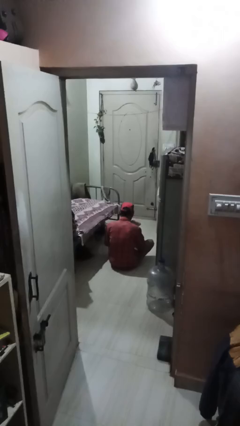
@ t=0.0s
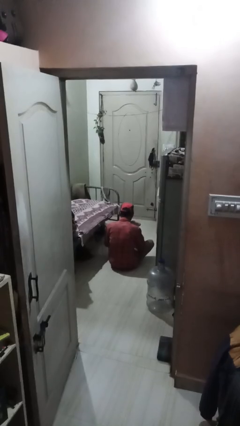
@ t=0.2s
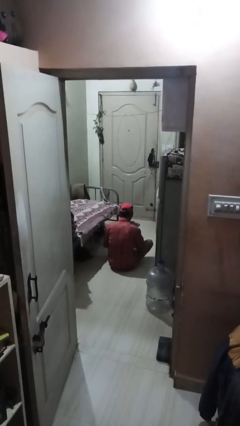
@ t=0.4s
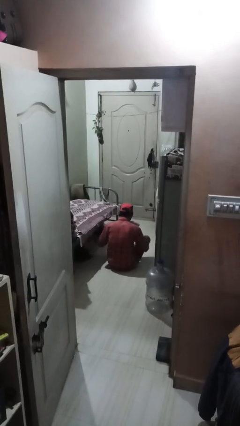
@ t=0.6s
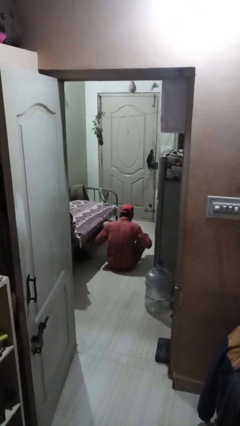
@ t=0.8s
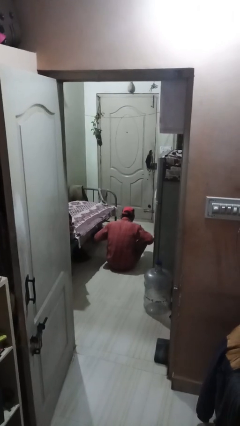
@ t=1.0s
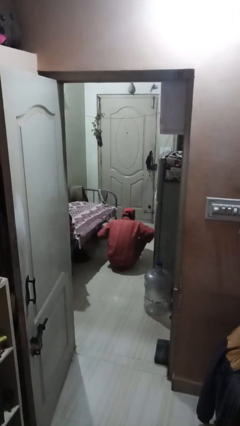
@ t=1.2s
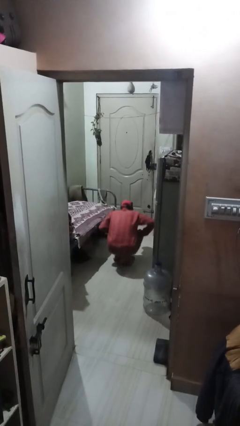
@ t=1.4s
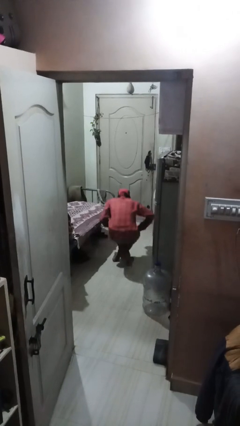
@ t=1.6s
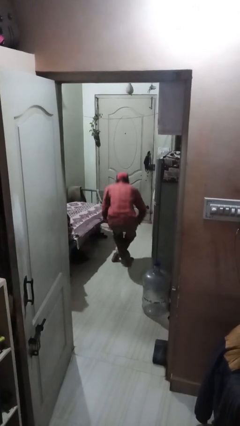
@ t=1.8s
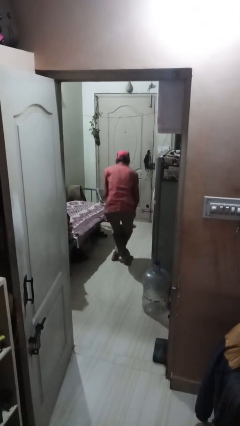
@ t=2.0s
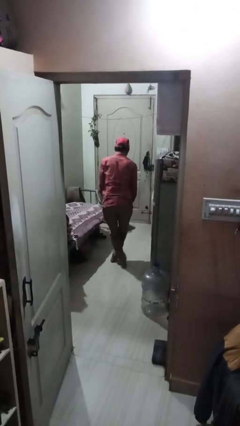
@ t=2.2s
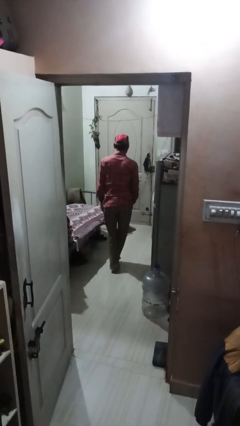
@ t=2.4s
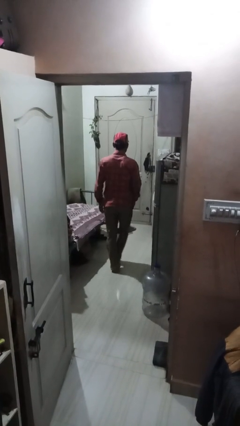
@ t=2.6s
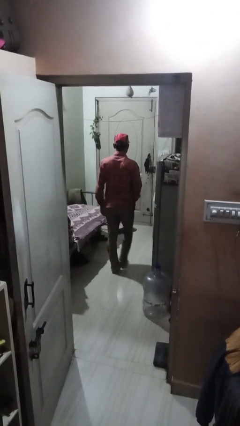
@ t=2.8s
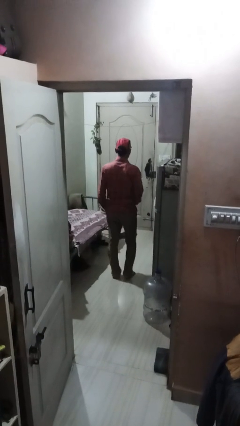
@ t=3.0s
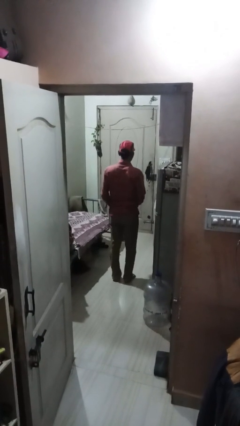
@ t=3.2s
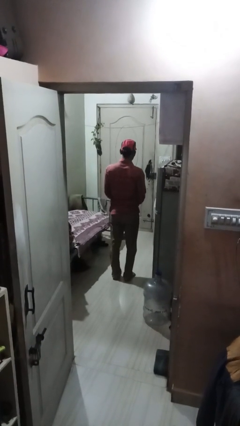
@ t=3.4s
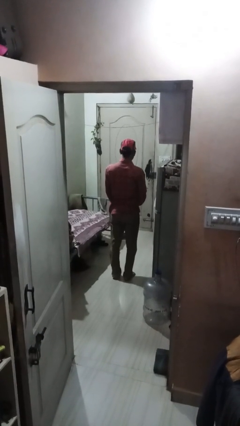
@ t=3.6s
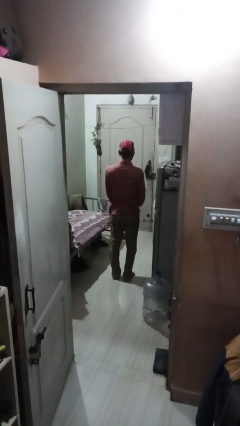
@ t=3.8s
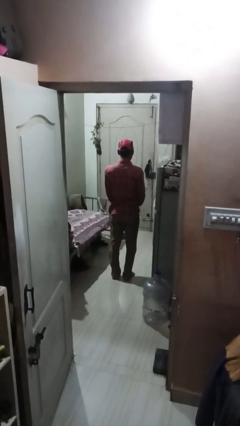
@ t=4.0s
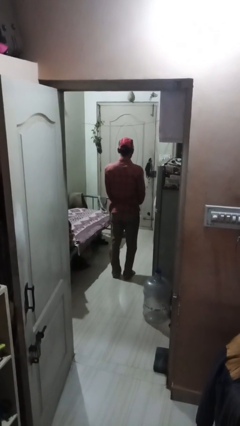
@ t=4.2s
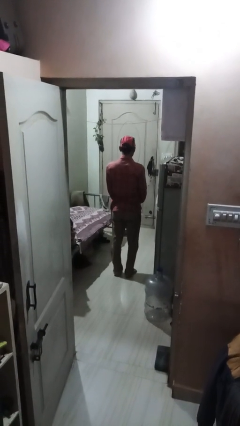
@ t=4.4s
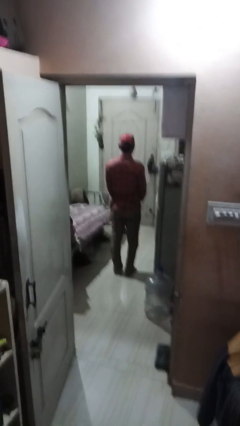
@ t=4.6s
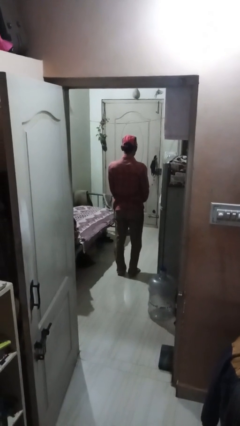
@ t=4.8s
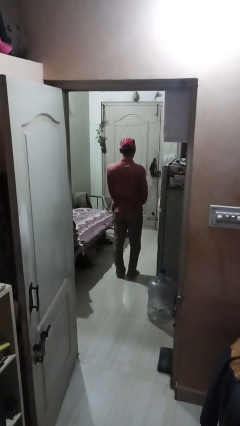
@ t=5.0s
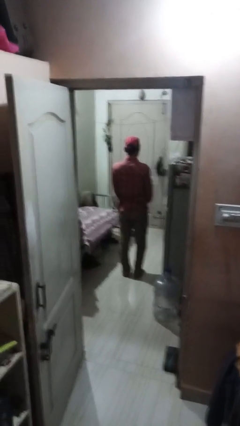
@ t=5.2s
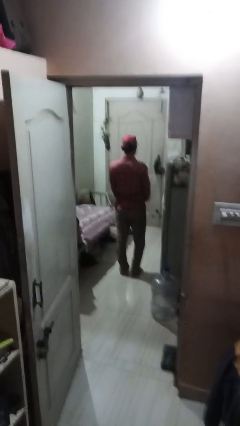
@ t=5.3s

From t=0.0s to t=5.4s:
person stands up from floor

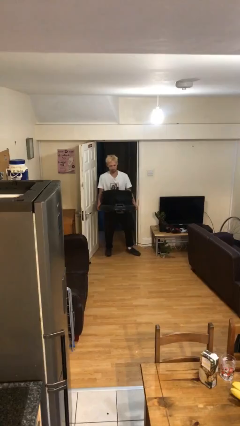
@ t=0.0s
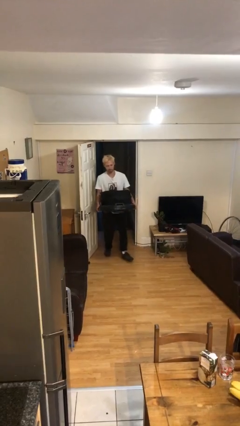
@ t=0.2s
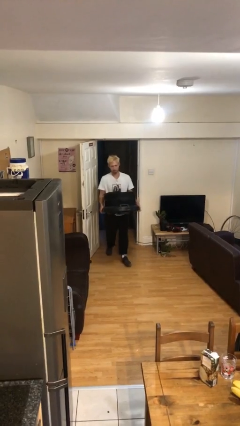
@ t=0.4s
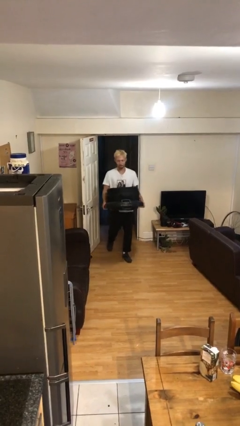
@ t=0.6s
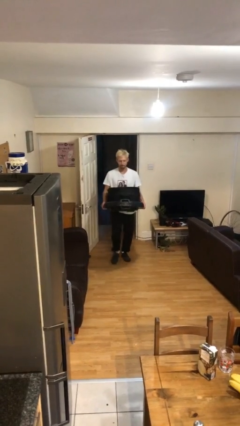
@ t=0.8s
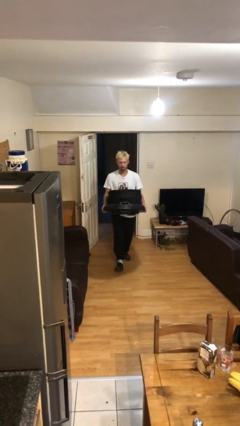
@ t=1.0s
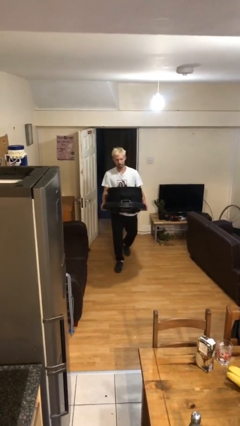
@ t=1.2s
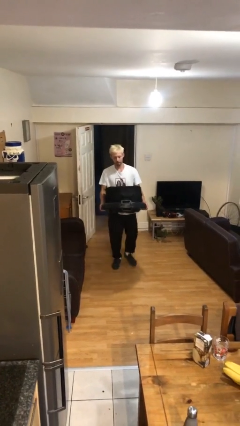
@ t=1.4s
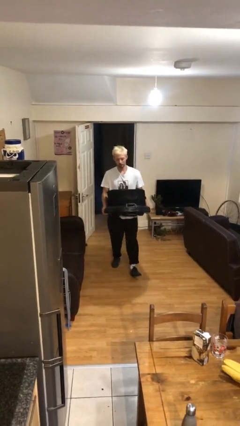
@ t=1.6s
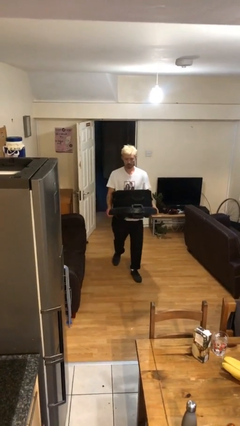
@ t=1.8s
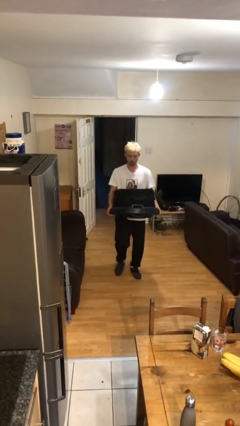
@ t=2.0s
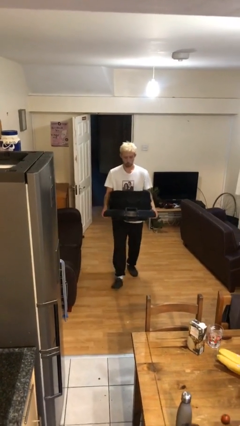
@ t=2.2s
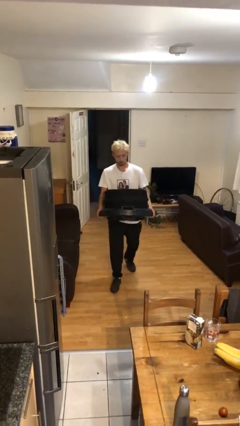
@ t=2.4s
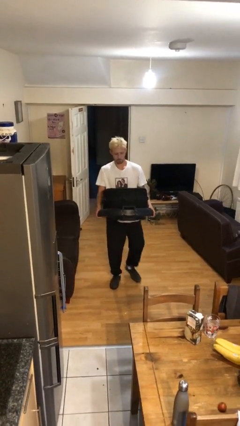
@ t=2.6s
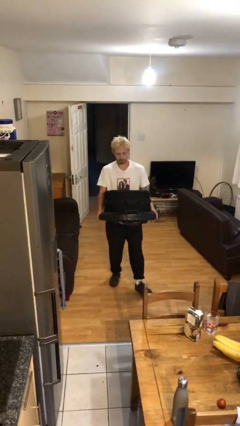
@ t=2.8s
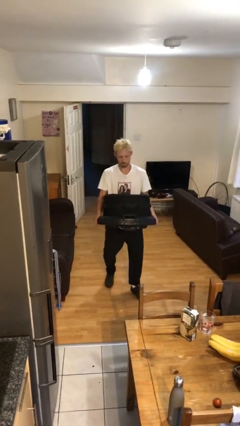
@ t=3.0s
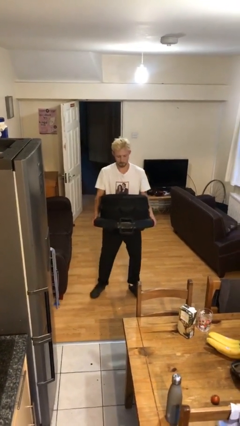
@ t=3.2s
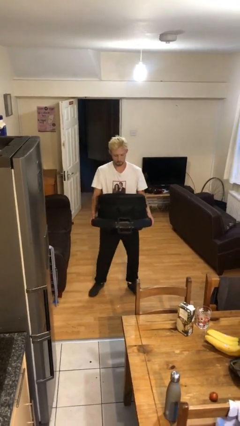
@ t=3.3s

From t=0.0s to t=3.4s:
person carries heavy object

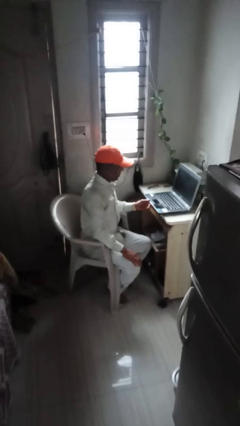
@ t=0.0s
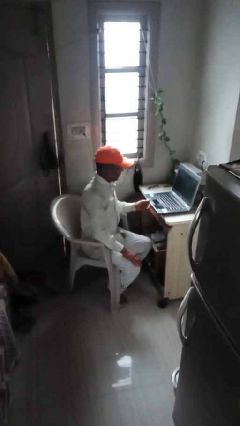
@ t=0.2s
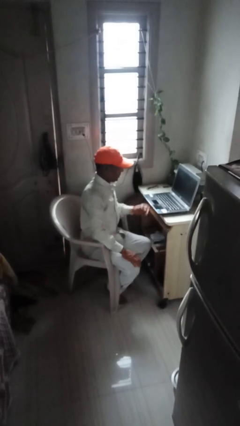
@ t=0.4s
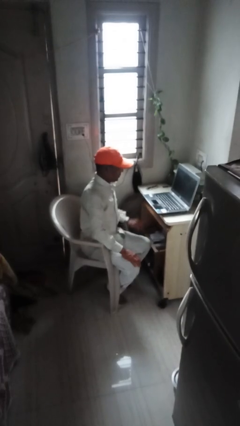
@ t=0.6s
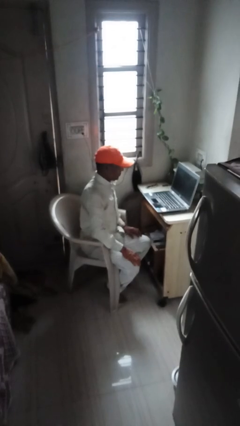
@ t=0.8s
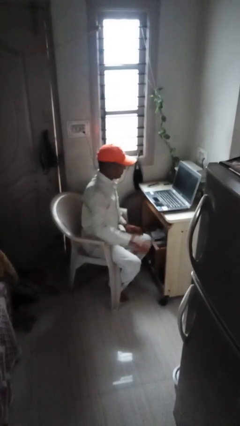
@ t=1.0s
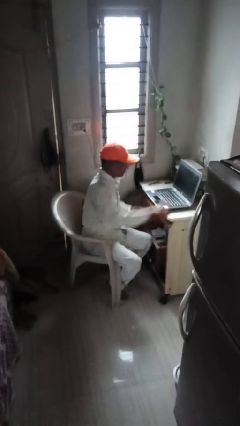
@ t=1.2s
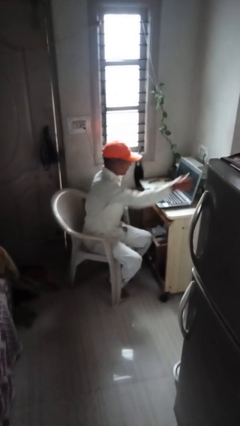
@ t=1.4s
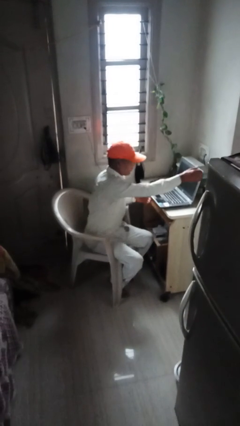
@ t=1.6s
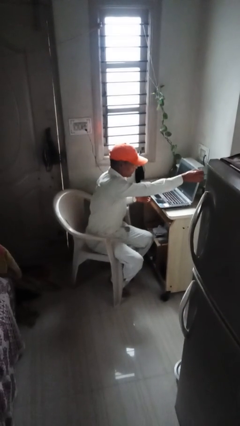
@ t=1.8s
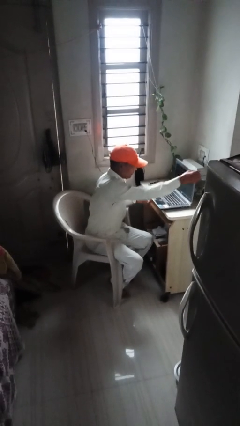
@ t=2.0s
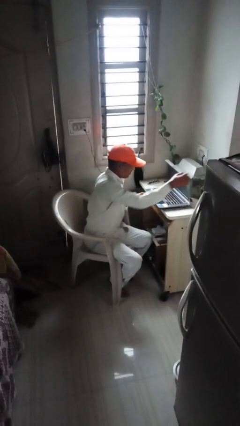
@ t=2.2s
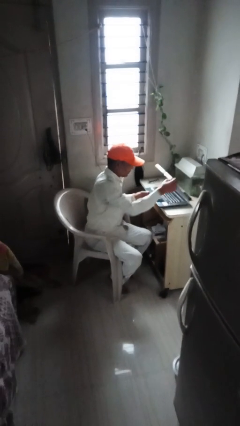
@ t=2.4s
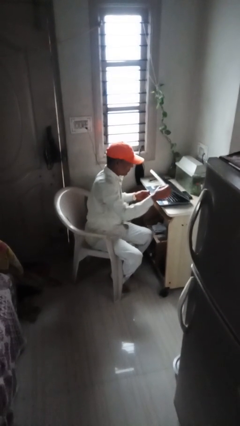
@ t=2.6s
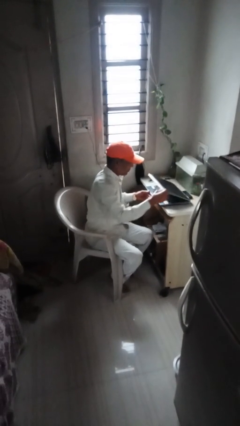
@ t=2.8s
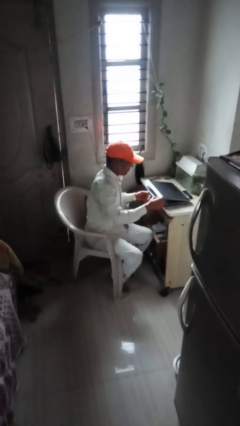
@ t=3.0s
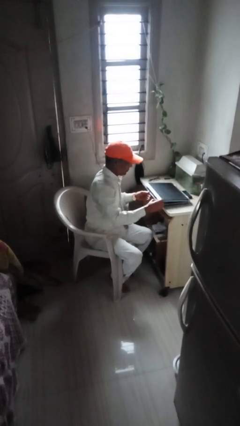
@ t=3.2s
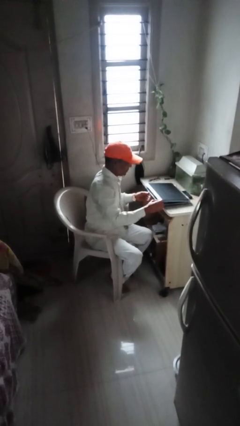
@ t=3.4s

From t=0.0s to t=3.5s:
person closes laptop

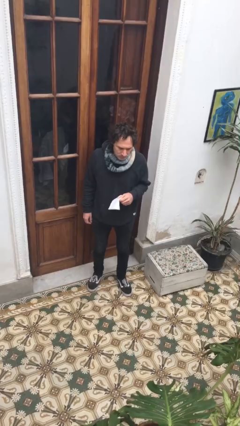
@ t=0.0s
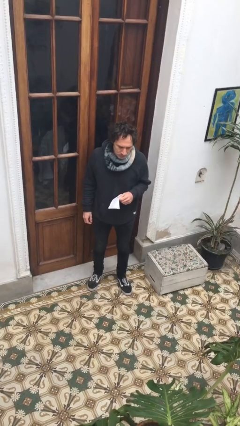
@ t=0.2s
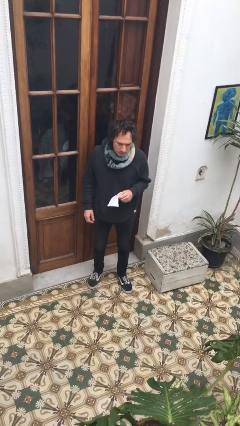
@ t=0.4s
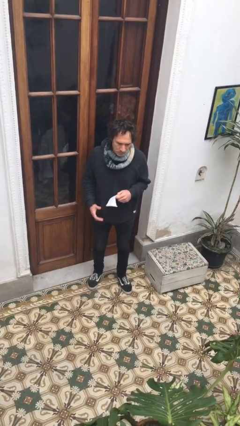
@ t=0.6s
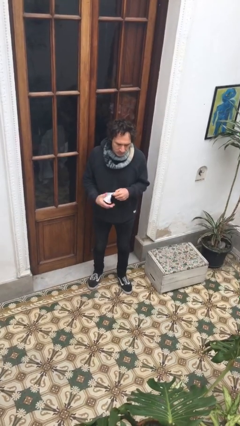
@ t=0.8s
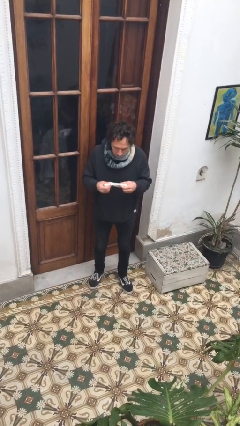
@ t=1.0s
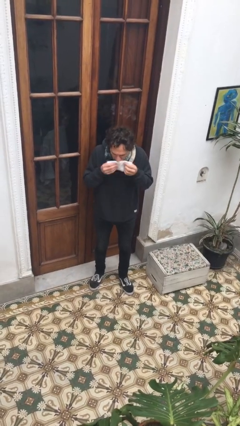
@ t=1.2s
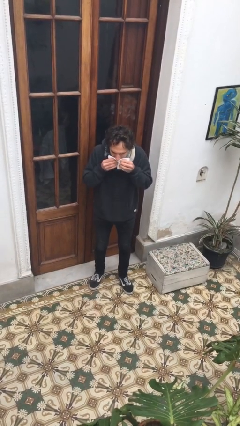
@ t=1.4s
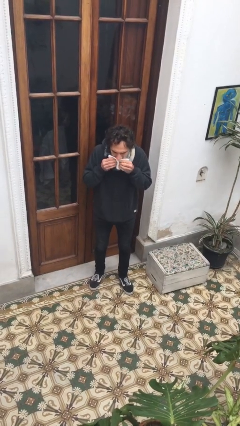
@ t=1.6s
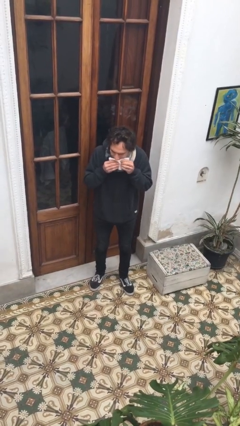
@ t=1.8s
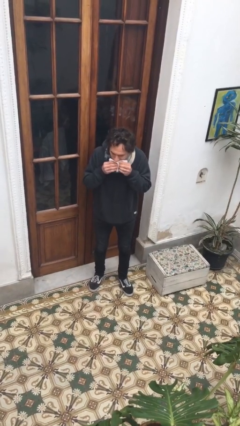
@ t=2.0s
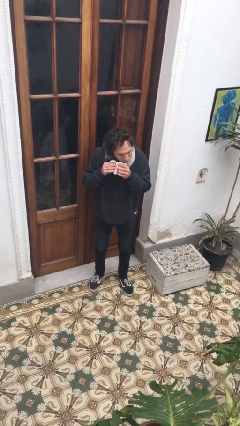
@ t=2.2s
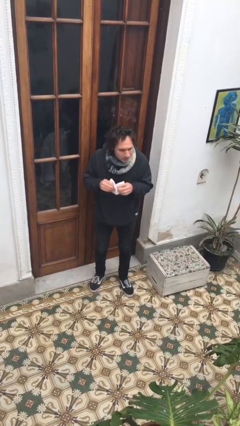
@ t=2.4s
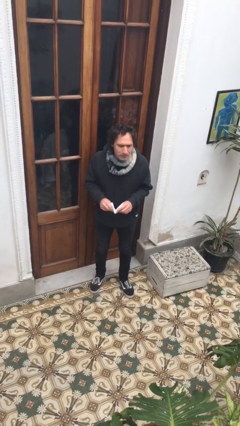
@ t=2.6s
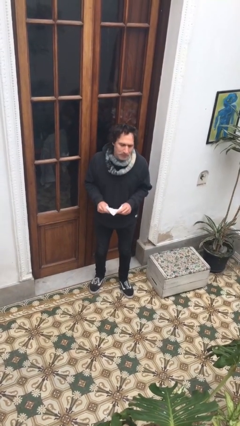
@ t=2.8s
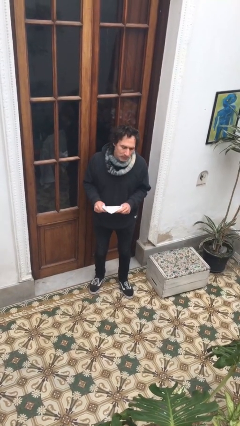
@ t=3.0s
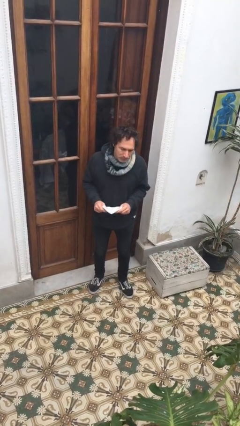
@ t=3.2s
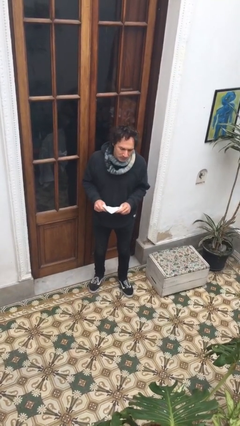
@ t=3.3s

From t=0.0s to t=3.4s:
person wipes mouth with napkin

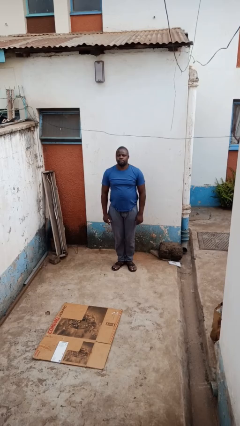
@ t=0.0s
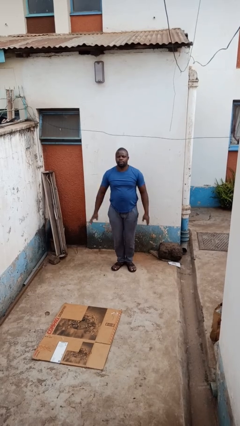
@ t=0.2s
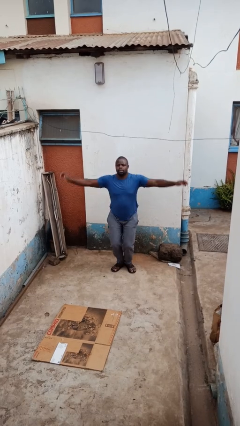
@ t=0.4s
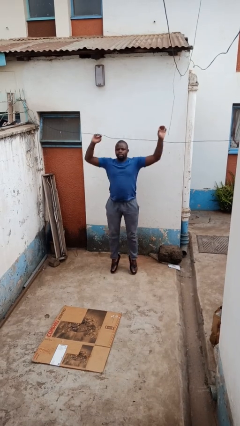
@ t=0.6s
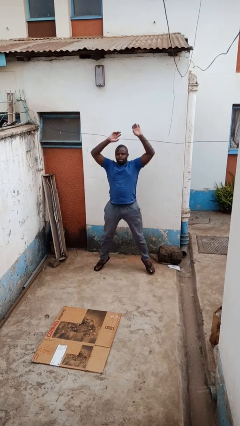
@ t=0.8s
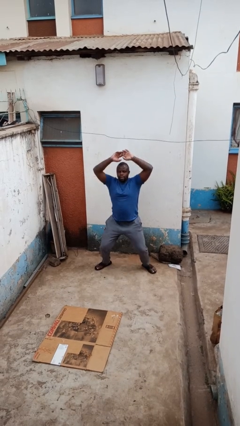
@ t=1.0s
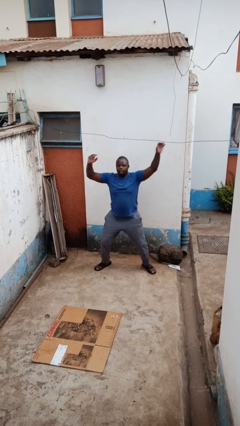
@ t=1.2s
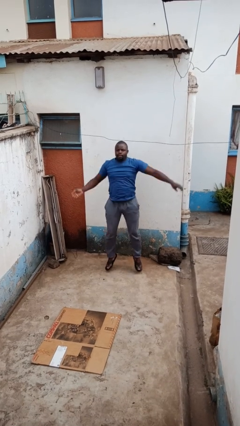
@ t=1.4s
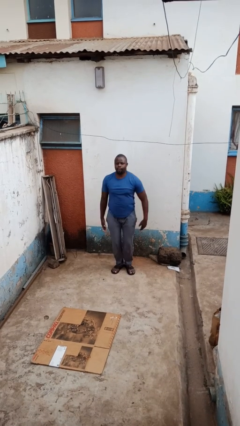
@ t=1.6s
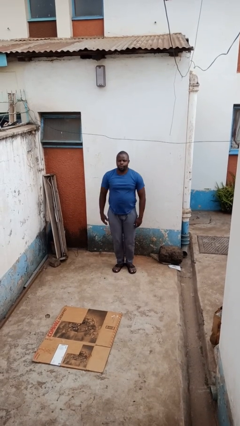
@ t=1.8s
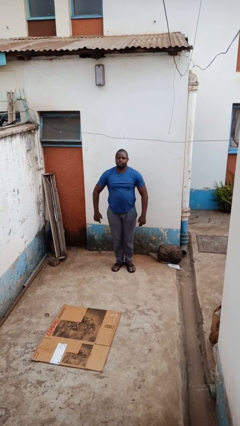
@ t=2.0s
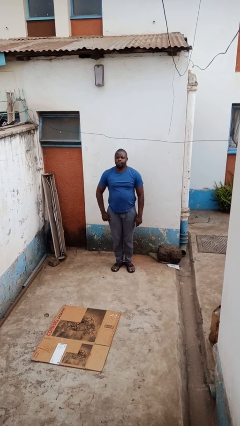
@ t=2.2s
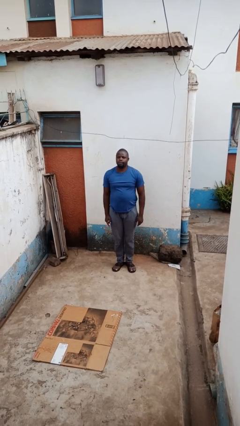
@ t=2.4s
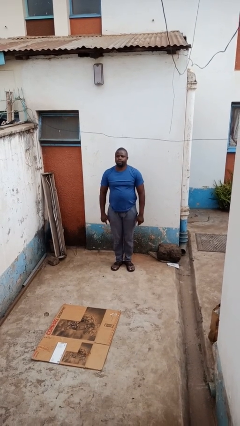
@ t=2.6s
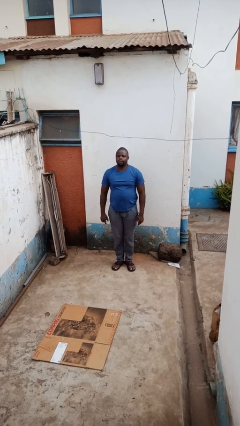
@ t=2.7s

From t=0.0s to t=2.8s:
person exercises with jumping jacks
